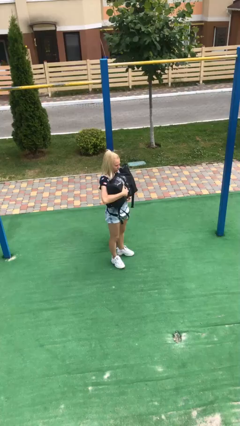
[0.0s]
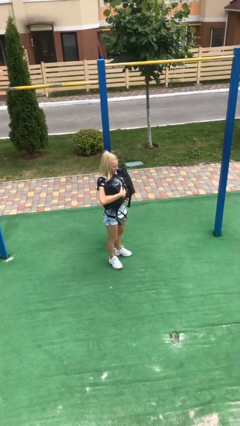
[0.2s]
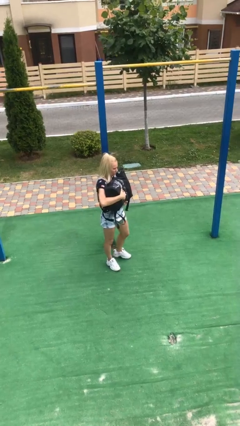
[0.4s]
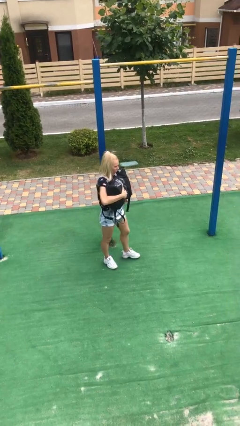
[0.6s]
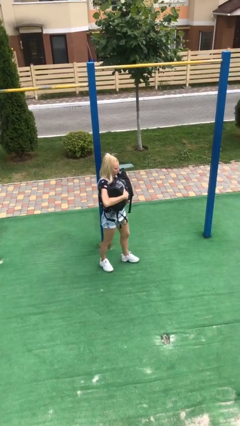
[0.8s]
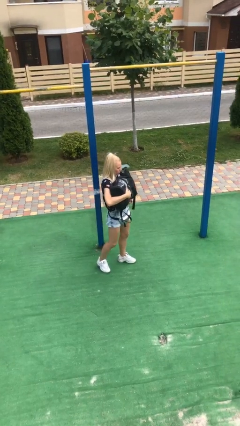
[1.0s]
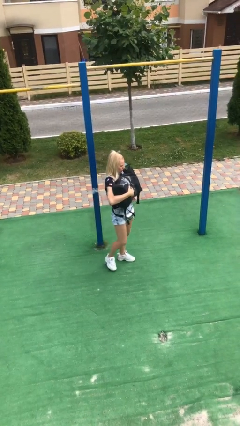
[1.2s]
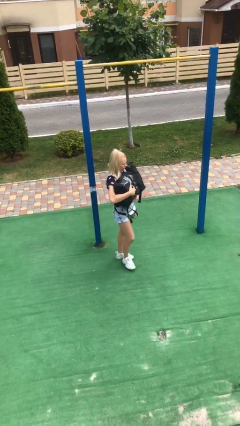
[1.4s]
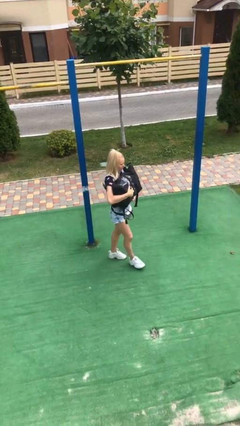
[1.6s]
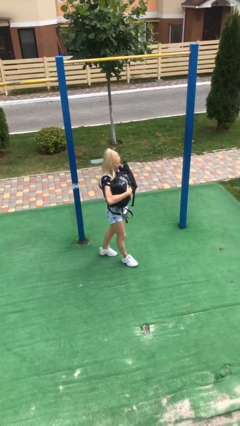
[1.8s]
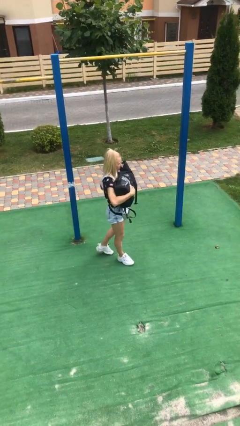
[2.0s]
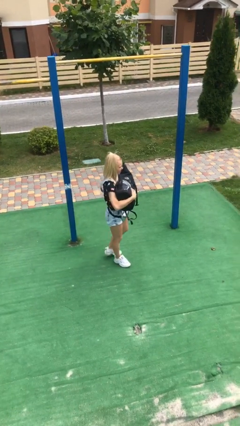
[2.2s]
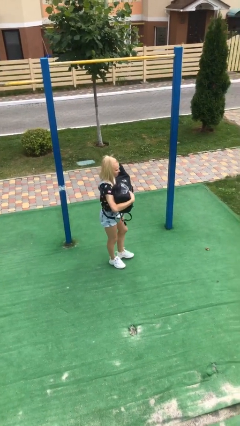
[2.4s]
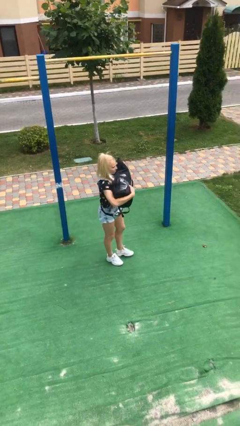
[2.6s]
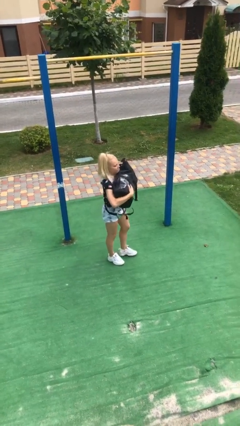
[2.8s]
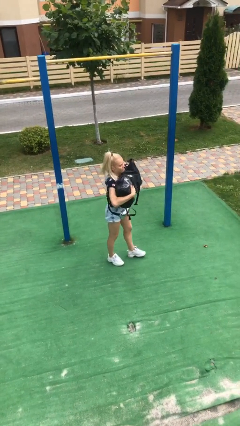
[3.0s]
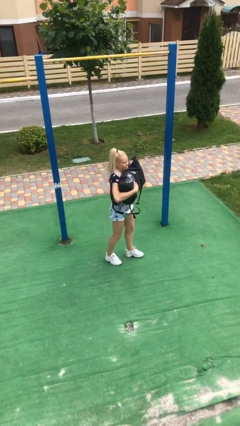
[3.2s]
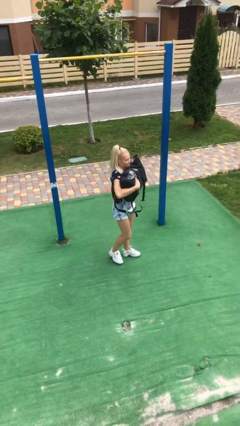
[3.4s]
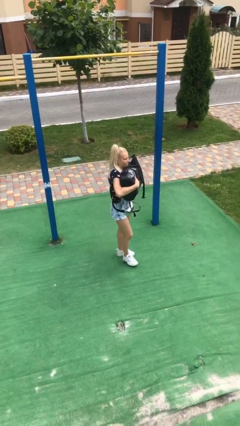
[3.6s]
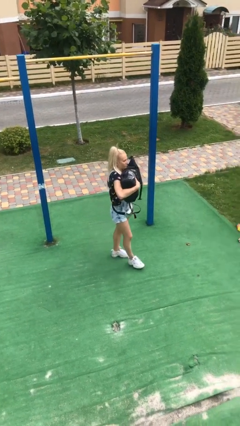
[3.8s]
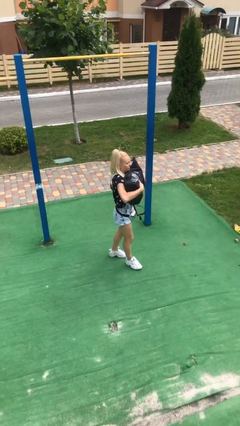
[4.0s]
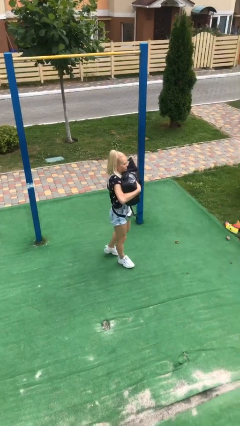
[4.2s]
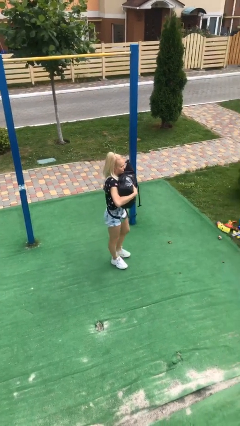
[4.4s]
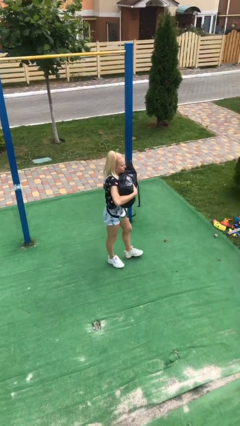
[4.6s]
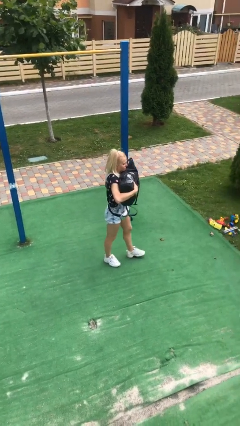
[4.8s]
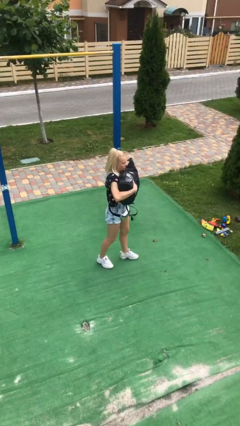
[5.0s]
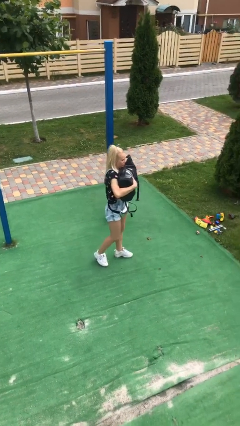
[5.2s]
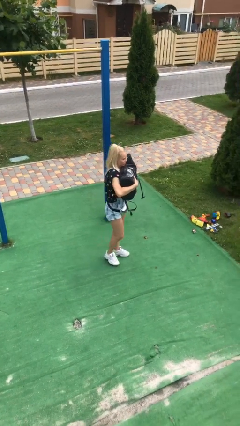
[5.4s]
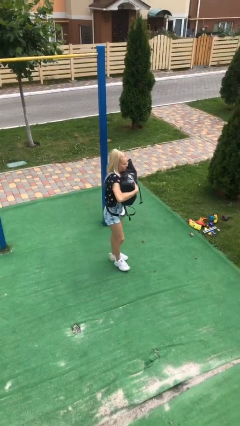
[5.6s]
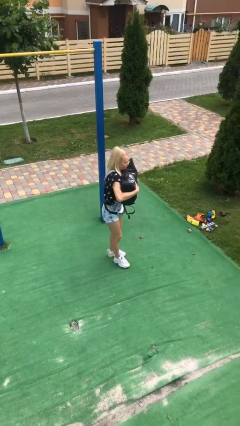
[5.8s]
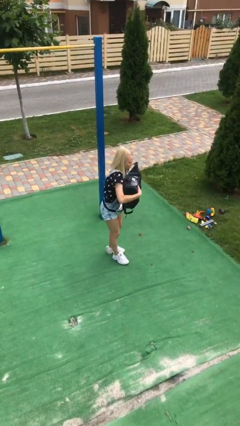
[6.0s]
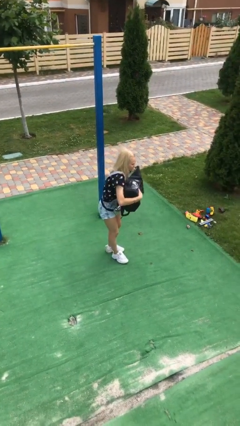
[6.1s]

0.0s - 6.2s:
person carries heavy object

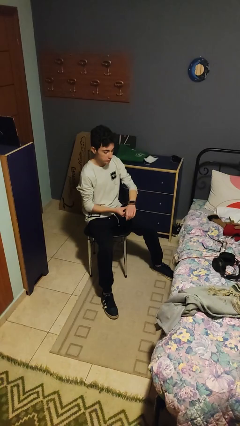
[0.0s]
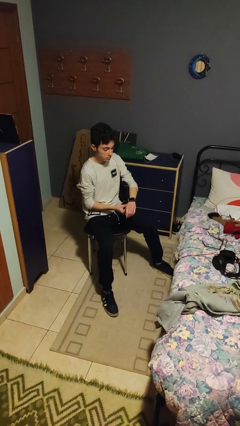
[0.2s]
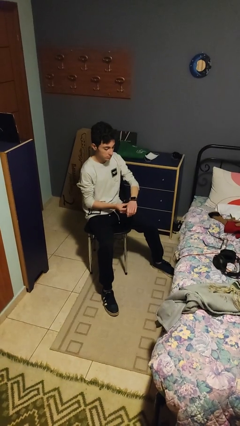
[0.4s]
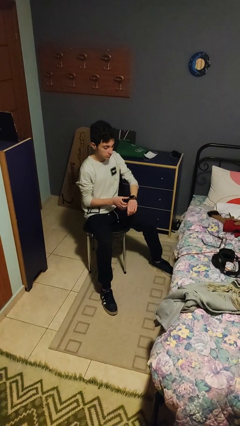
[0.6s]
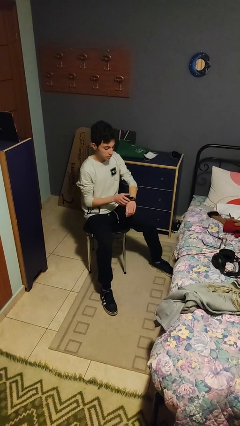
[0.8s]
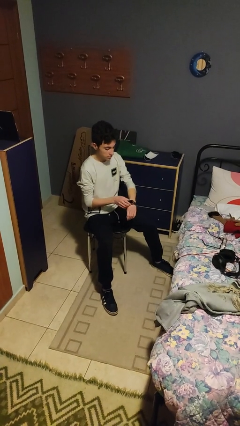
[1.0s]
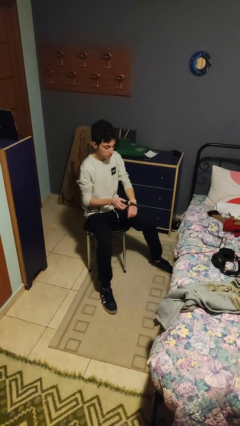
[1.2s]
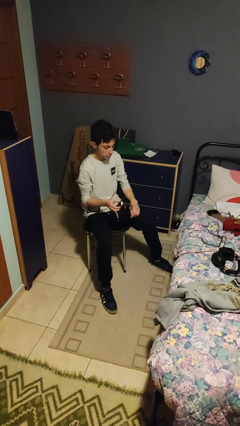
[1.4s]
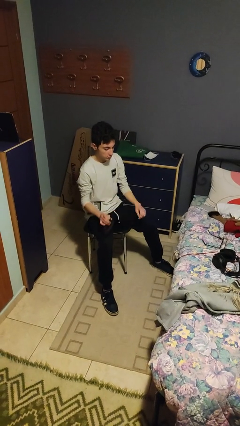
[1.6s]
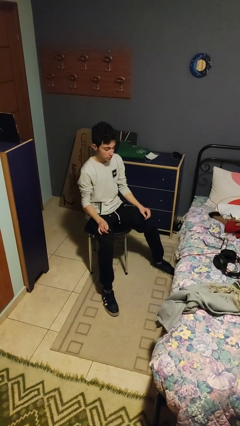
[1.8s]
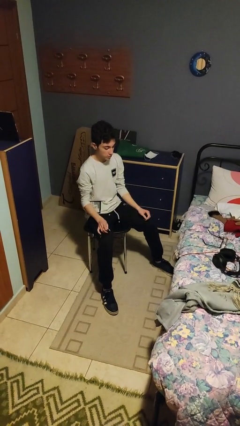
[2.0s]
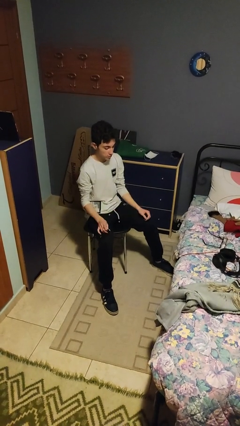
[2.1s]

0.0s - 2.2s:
person takes off wristwatch

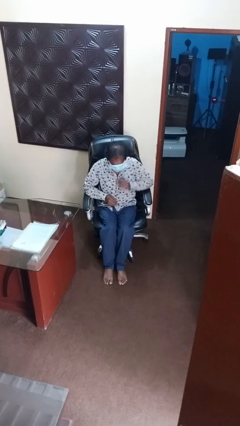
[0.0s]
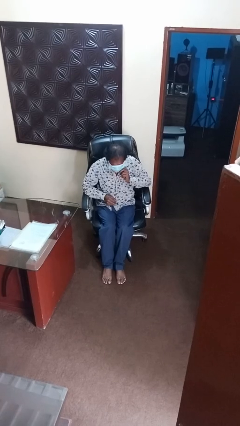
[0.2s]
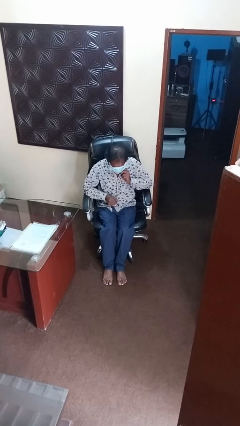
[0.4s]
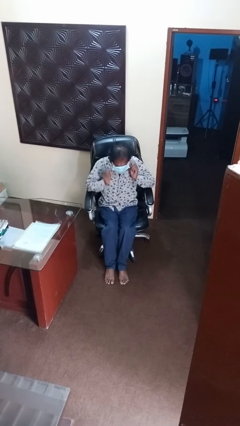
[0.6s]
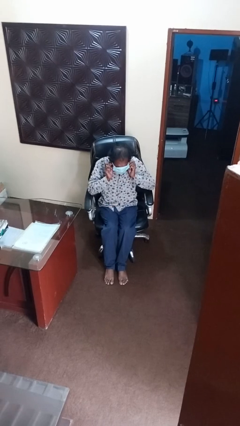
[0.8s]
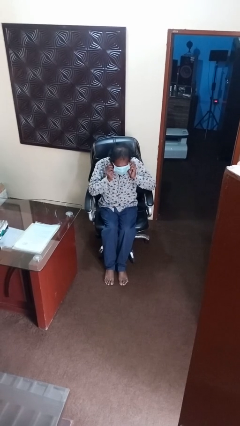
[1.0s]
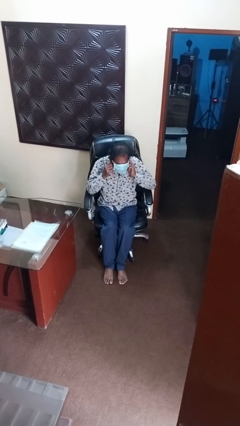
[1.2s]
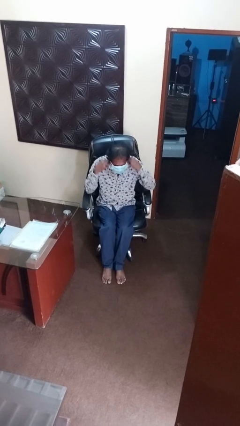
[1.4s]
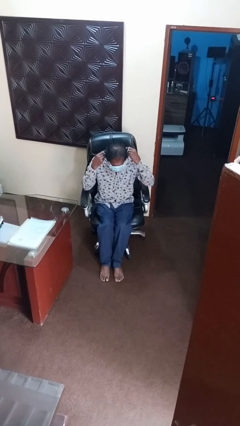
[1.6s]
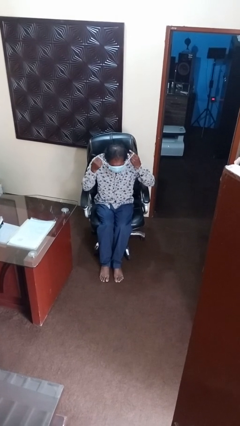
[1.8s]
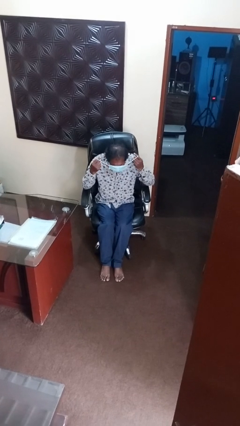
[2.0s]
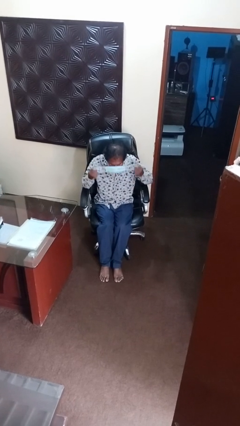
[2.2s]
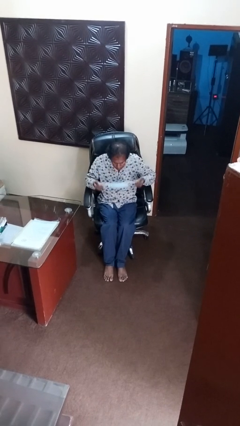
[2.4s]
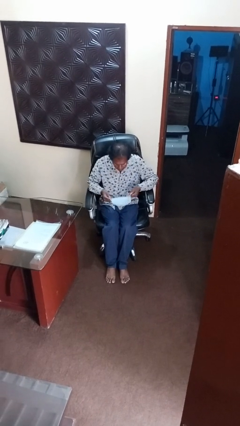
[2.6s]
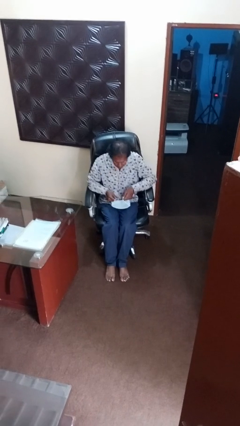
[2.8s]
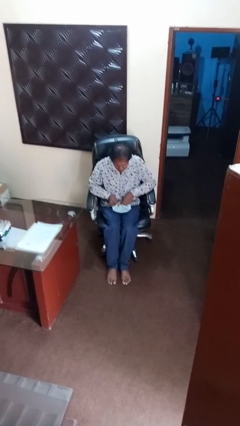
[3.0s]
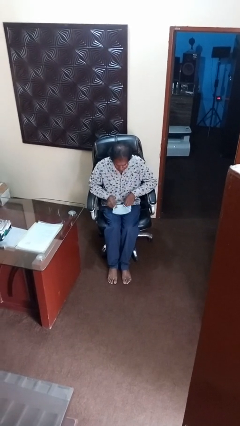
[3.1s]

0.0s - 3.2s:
person takes off facemask

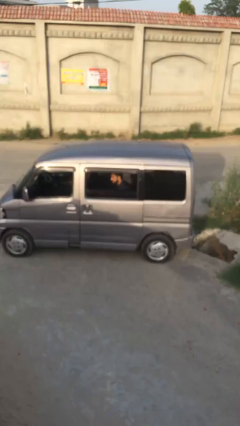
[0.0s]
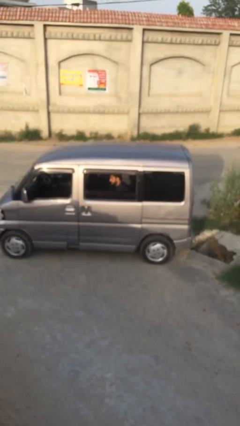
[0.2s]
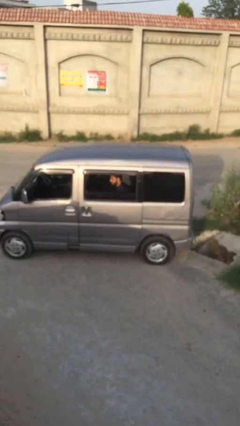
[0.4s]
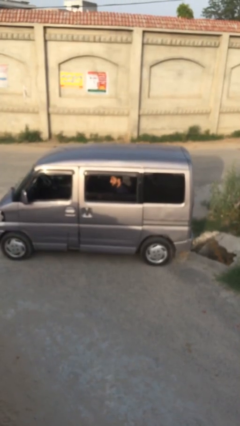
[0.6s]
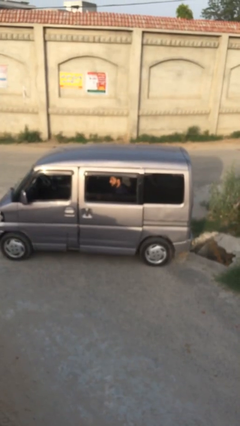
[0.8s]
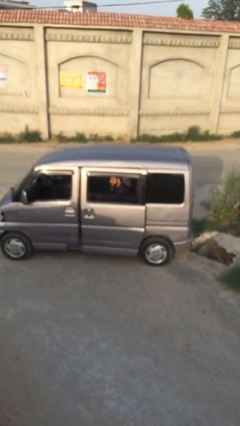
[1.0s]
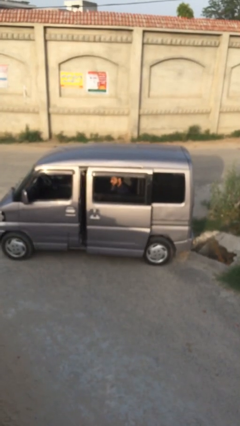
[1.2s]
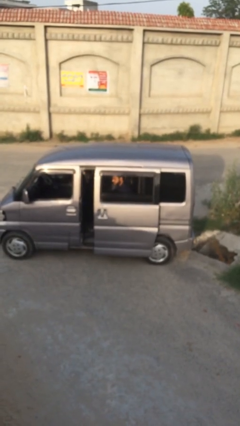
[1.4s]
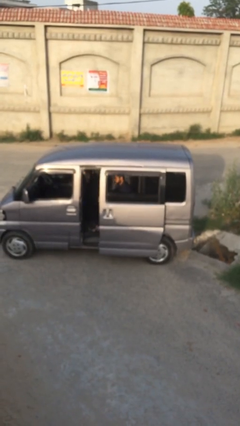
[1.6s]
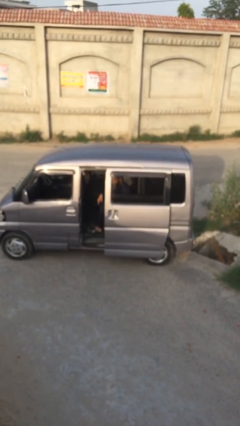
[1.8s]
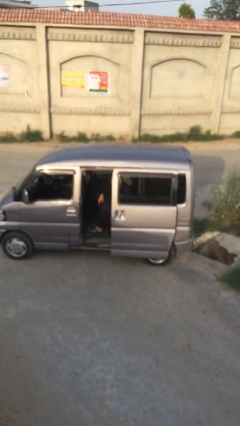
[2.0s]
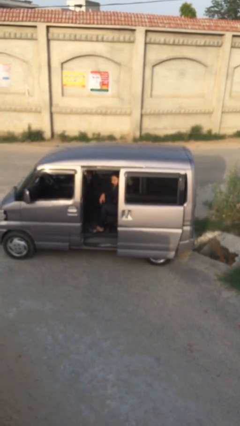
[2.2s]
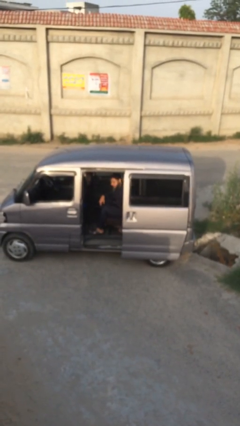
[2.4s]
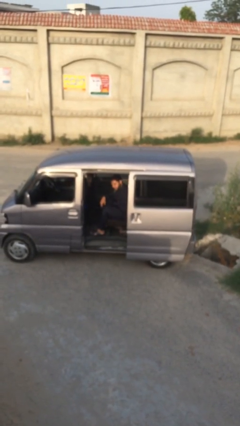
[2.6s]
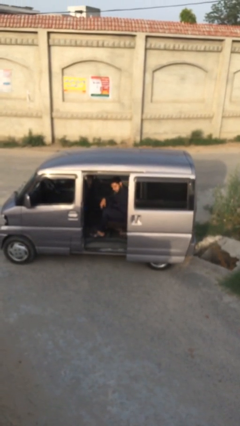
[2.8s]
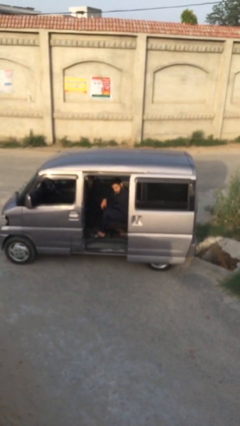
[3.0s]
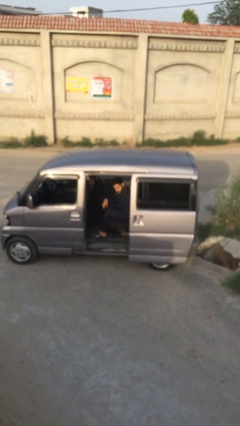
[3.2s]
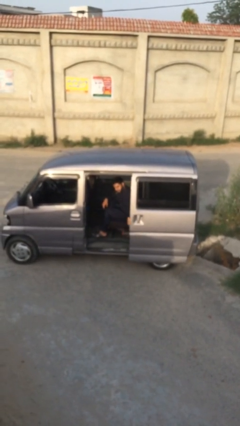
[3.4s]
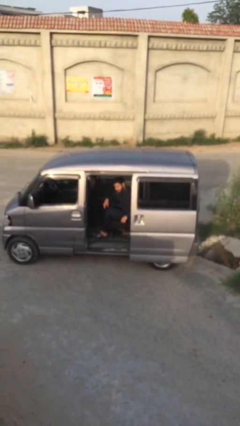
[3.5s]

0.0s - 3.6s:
person opens car door

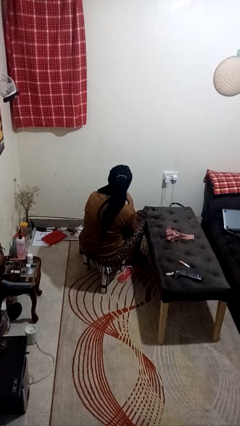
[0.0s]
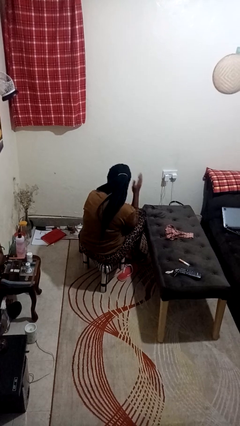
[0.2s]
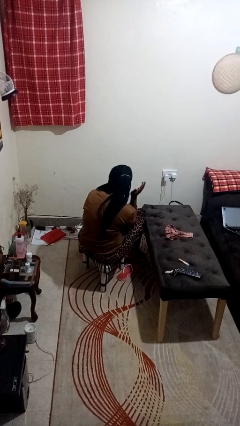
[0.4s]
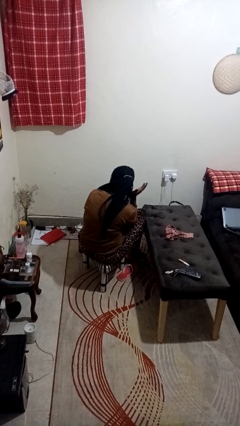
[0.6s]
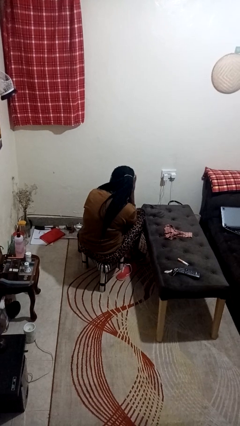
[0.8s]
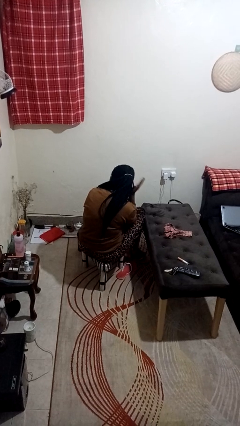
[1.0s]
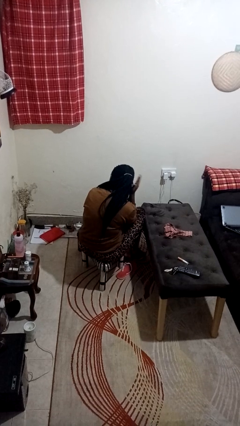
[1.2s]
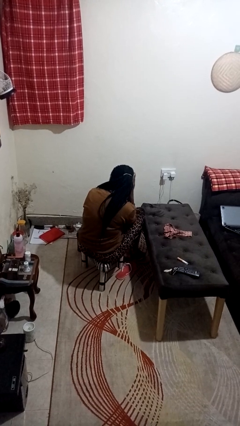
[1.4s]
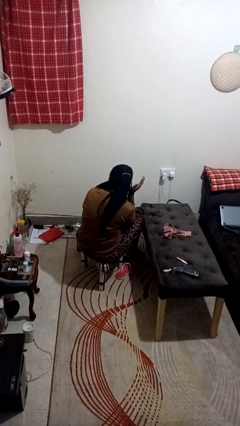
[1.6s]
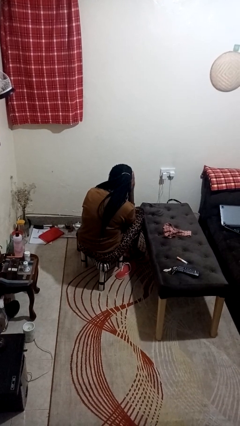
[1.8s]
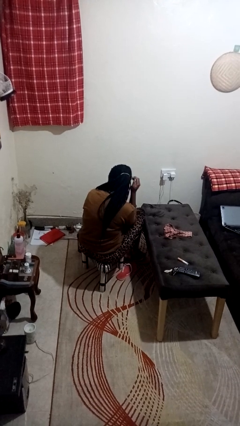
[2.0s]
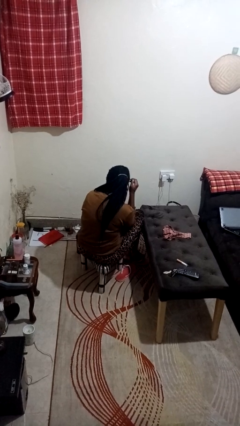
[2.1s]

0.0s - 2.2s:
person pats head
